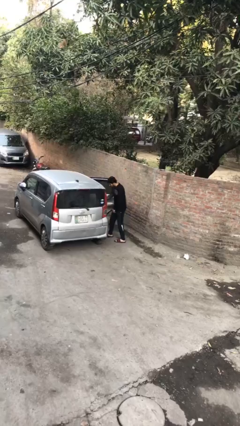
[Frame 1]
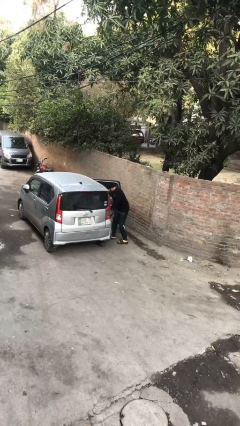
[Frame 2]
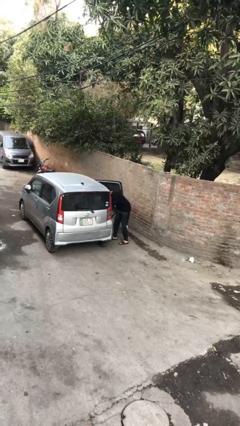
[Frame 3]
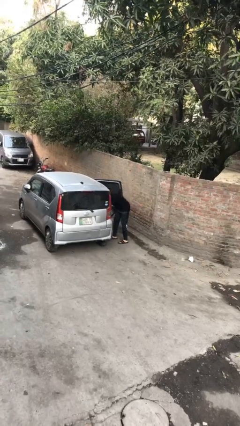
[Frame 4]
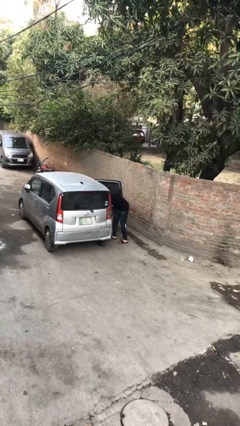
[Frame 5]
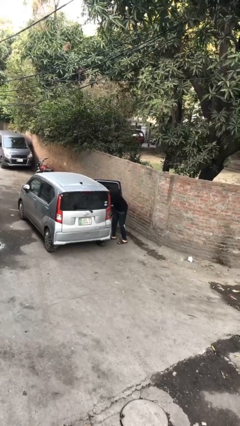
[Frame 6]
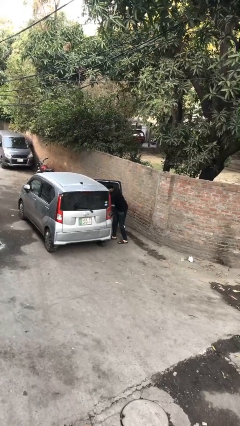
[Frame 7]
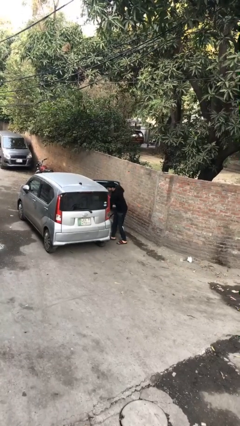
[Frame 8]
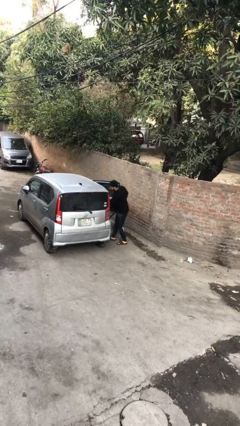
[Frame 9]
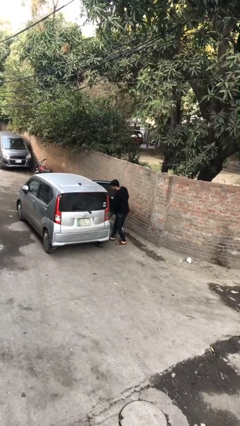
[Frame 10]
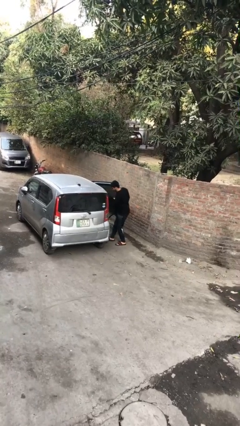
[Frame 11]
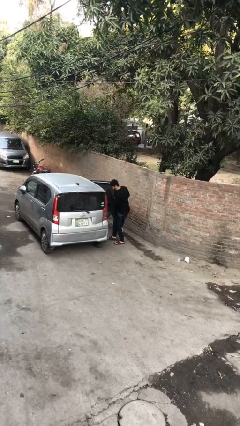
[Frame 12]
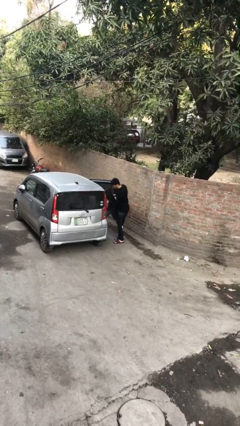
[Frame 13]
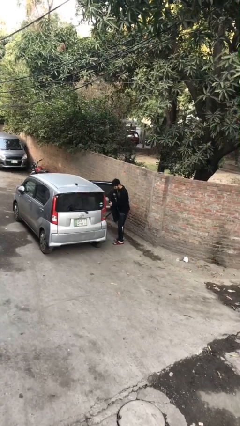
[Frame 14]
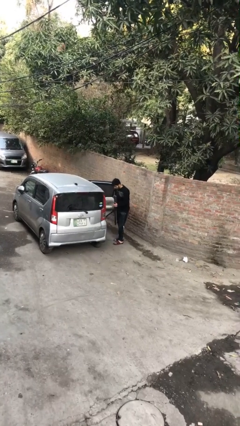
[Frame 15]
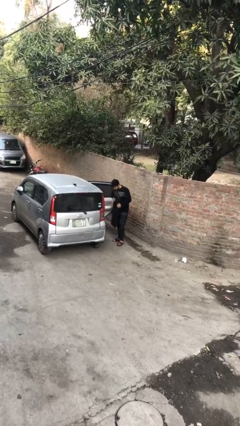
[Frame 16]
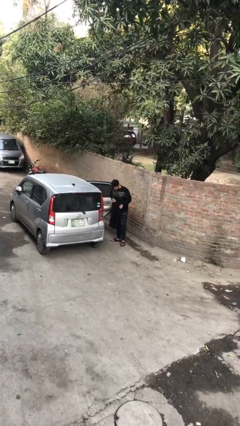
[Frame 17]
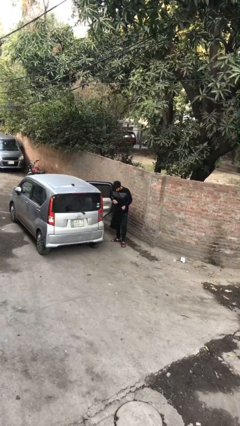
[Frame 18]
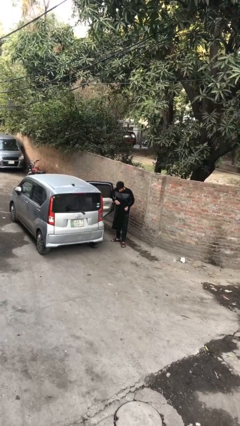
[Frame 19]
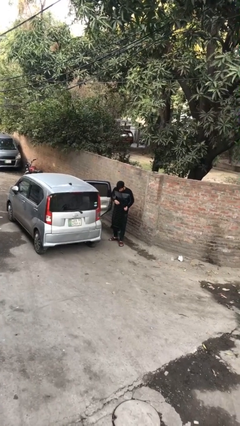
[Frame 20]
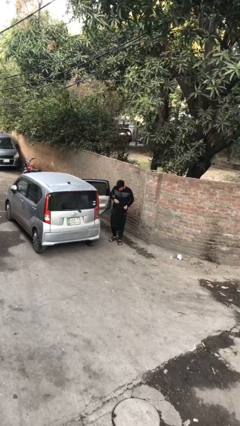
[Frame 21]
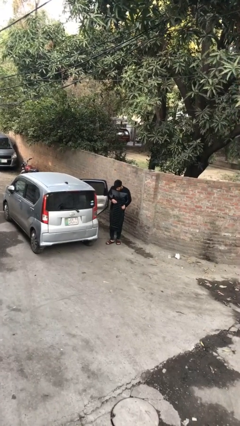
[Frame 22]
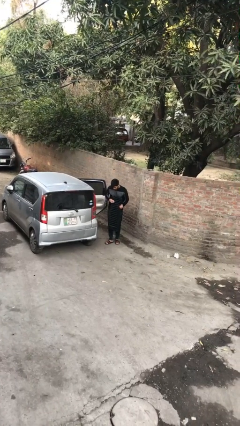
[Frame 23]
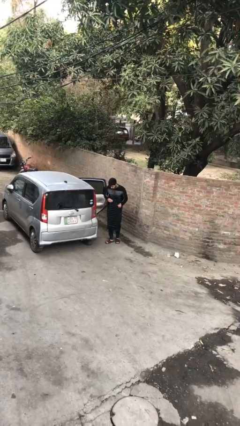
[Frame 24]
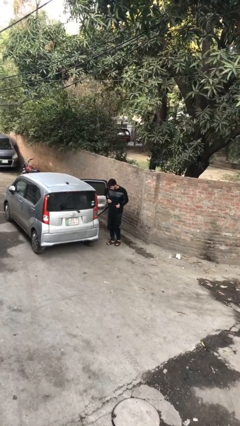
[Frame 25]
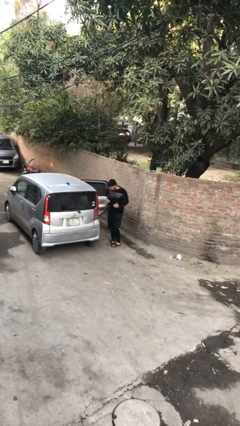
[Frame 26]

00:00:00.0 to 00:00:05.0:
person unloads car

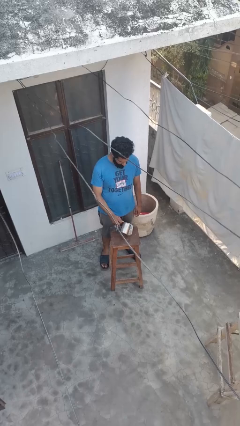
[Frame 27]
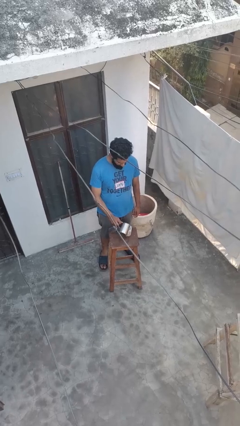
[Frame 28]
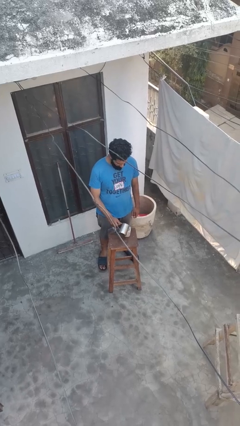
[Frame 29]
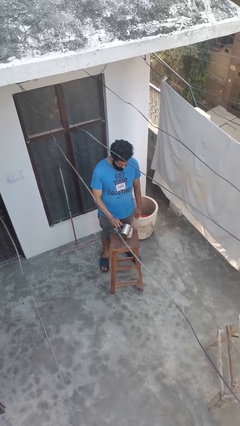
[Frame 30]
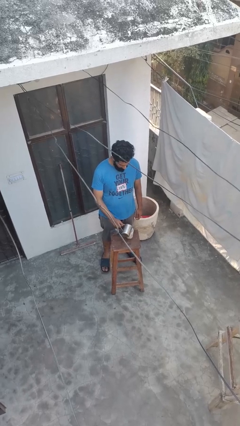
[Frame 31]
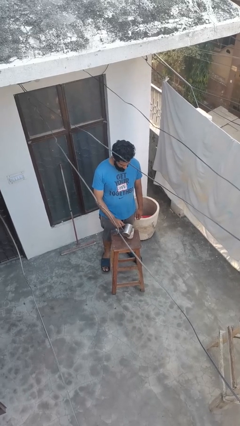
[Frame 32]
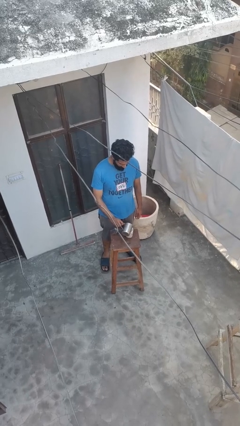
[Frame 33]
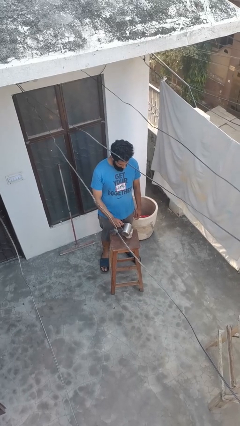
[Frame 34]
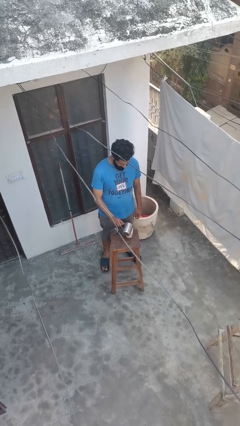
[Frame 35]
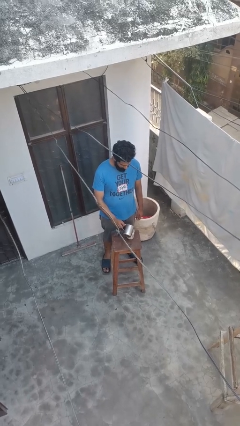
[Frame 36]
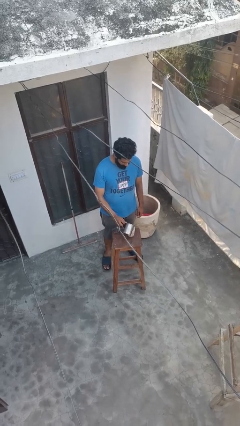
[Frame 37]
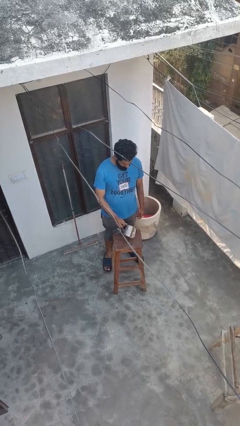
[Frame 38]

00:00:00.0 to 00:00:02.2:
person pours coffee into mug

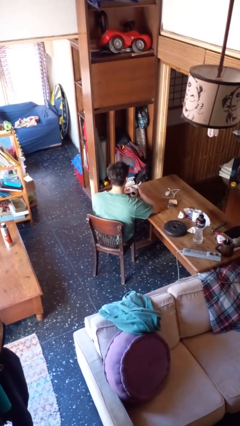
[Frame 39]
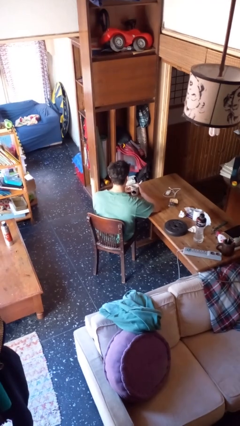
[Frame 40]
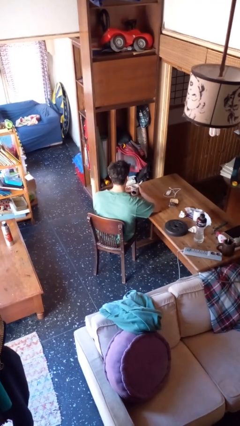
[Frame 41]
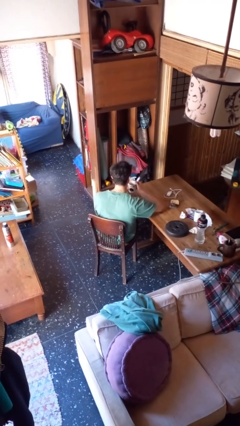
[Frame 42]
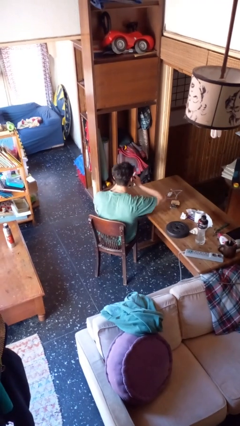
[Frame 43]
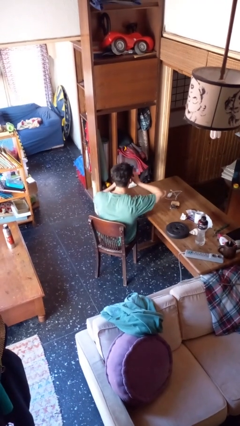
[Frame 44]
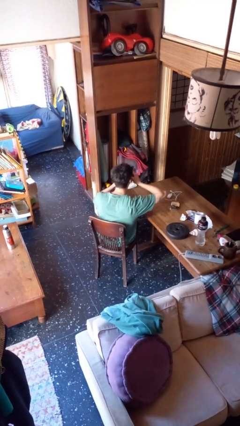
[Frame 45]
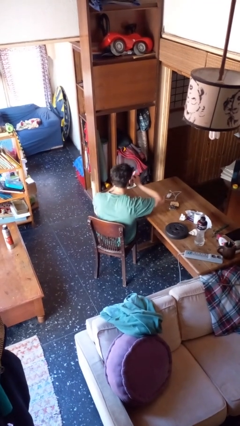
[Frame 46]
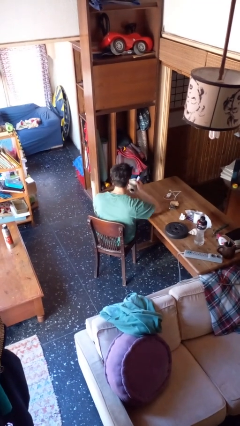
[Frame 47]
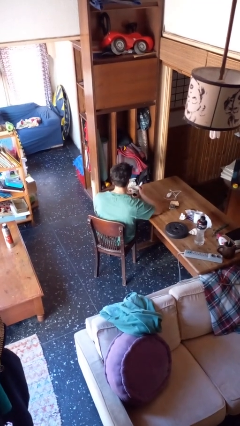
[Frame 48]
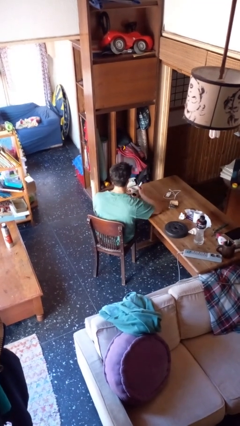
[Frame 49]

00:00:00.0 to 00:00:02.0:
person drinks from mug

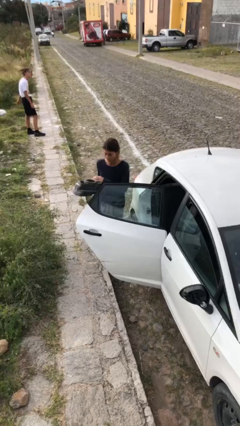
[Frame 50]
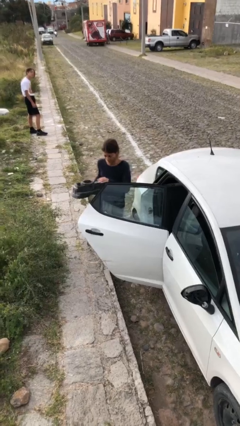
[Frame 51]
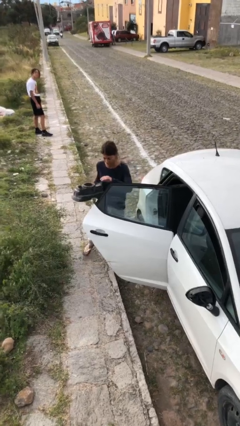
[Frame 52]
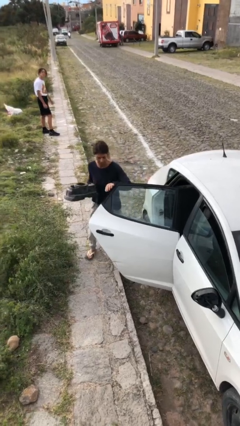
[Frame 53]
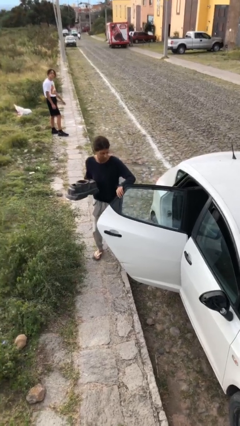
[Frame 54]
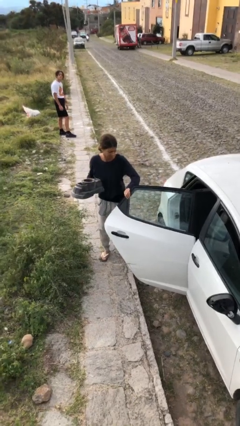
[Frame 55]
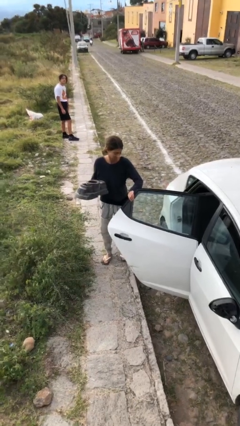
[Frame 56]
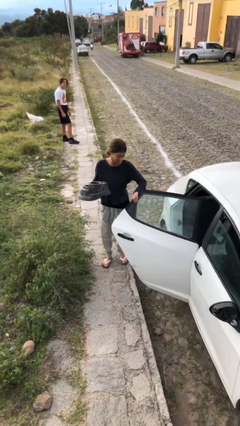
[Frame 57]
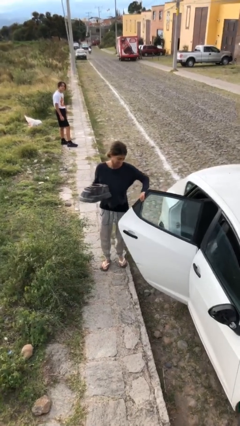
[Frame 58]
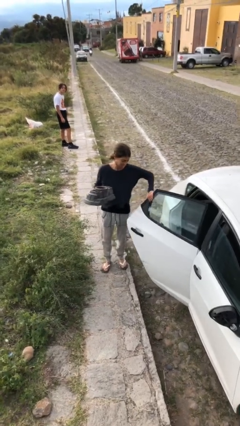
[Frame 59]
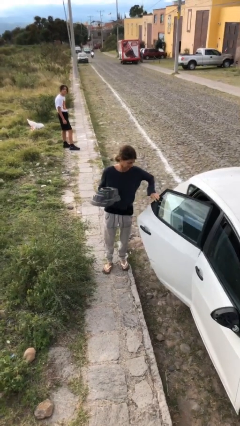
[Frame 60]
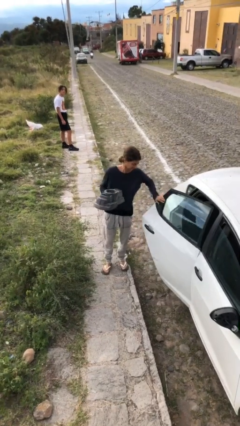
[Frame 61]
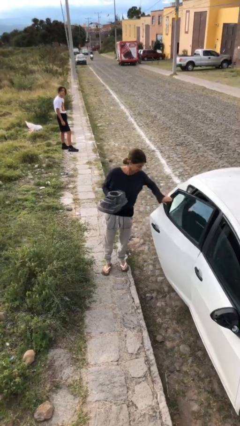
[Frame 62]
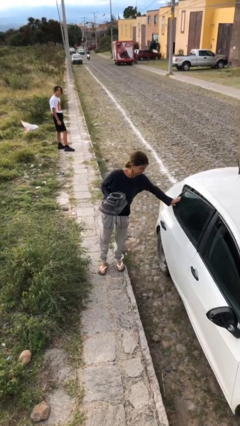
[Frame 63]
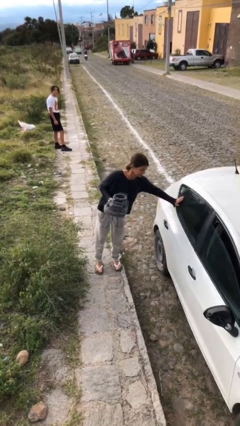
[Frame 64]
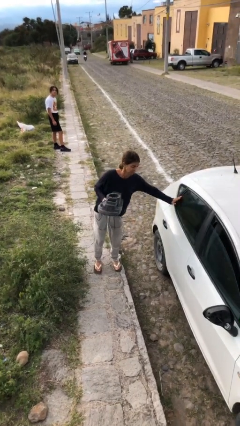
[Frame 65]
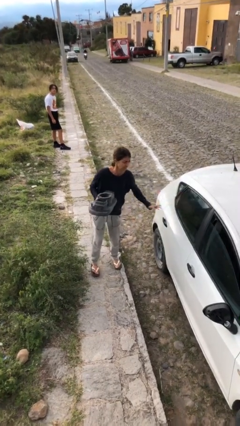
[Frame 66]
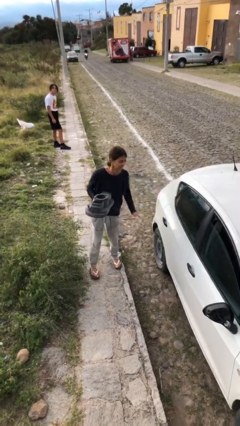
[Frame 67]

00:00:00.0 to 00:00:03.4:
person closes car door

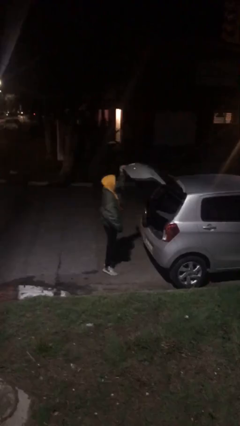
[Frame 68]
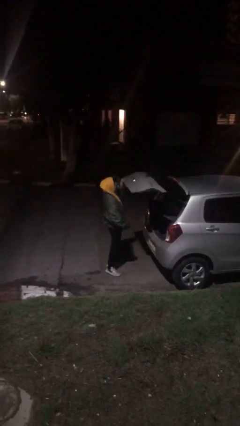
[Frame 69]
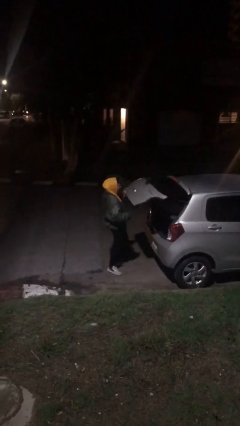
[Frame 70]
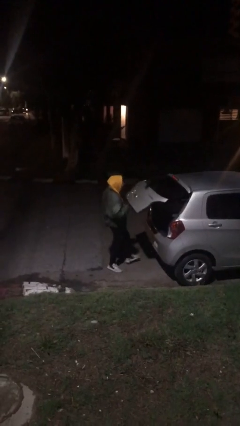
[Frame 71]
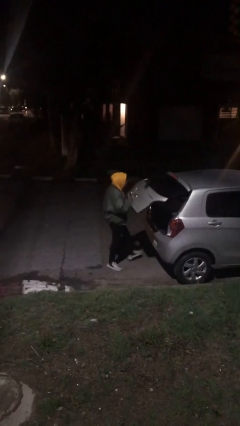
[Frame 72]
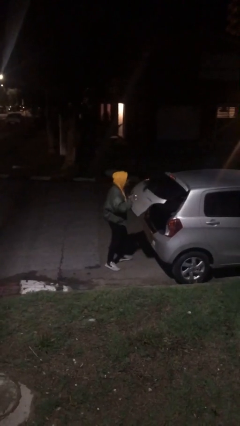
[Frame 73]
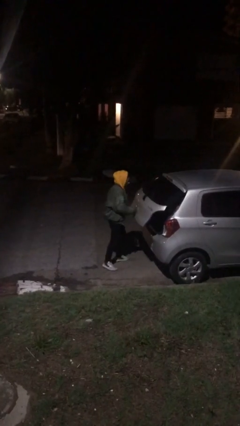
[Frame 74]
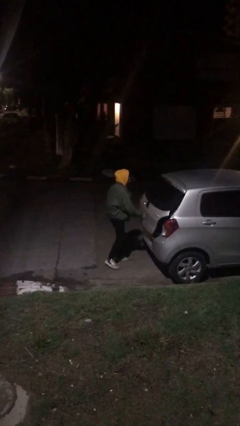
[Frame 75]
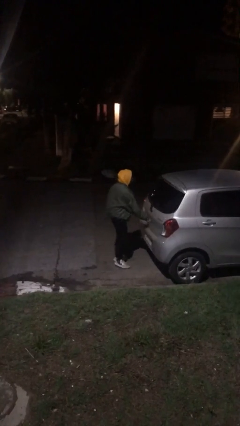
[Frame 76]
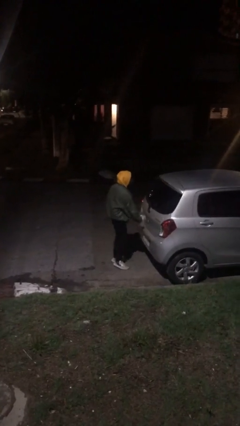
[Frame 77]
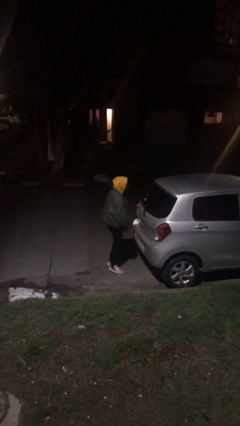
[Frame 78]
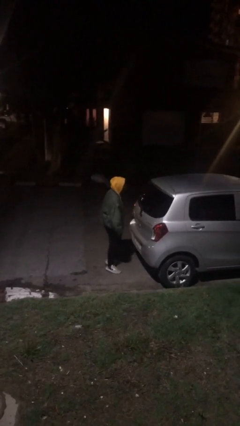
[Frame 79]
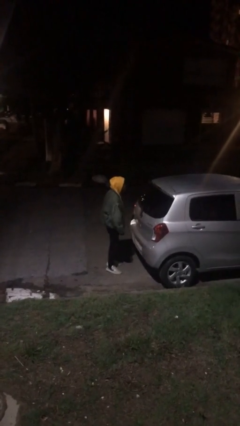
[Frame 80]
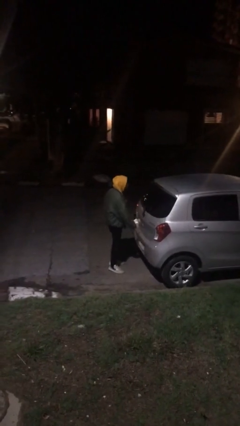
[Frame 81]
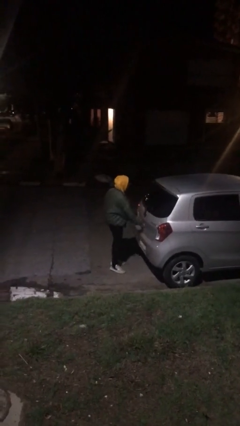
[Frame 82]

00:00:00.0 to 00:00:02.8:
person closes car trunk

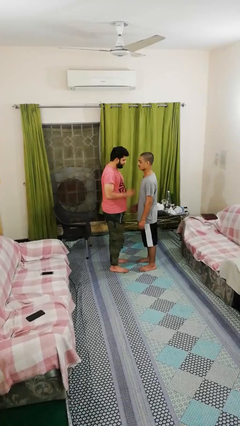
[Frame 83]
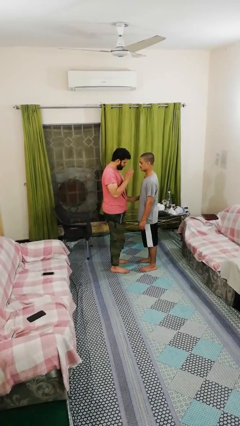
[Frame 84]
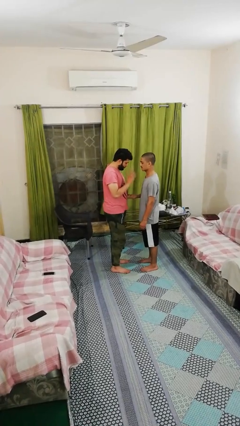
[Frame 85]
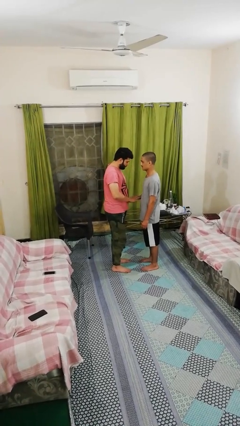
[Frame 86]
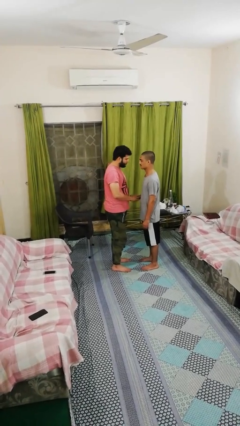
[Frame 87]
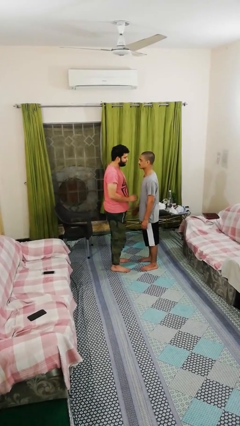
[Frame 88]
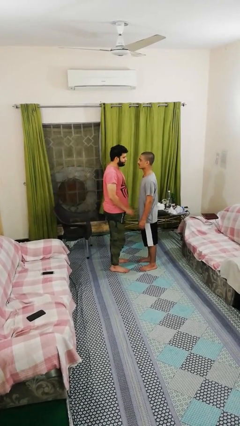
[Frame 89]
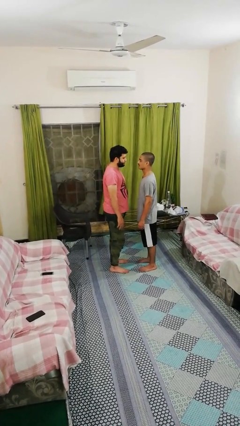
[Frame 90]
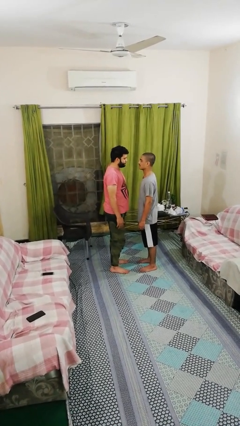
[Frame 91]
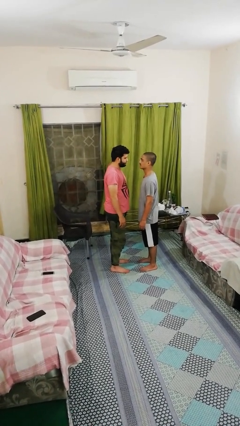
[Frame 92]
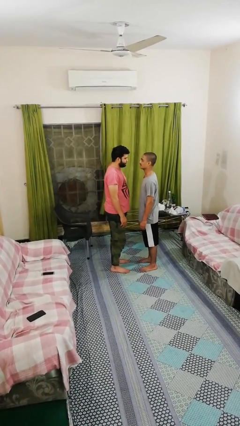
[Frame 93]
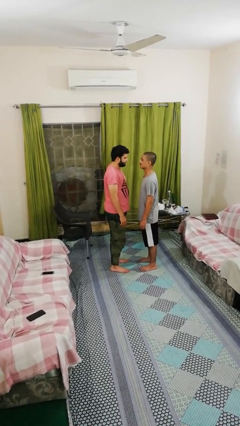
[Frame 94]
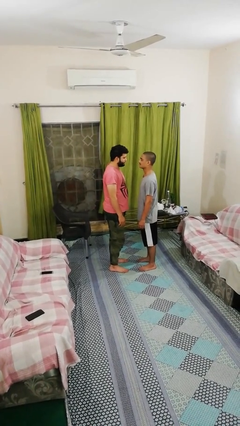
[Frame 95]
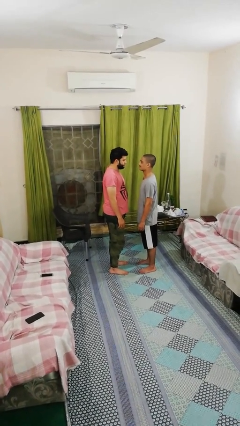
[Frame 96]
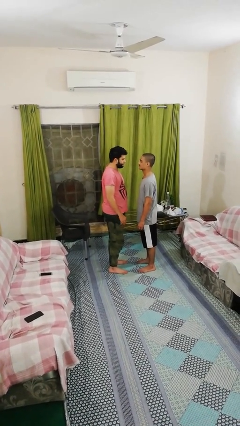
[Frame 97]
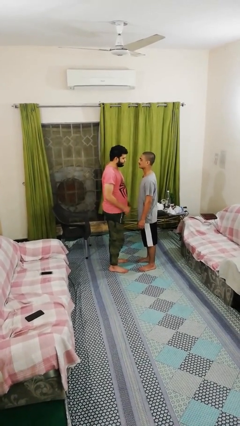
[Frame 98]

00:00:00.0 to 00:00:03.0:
person highfives hand
